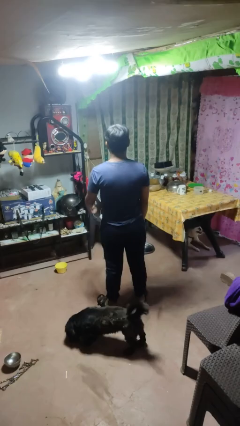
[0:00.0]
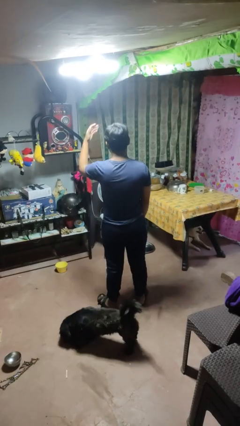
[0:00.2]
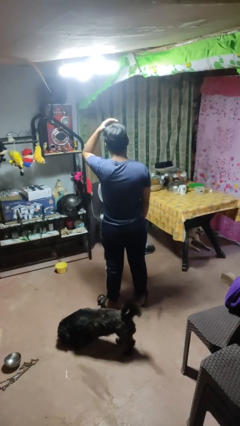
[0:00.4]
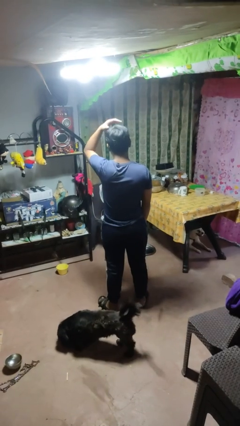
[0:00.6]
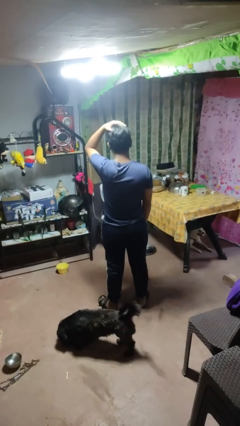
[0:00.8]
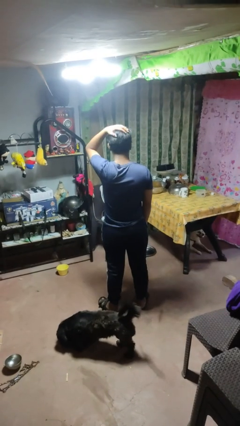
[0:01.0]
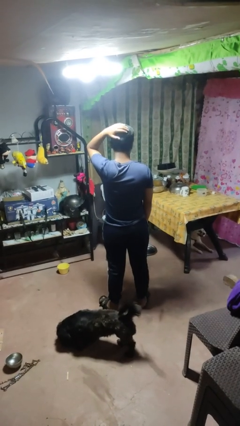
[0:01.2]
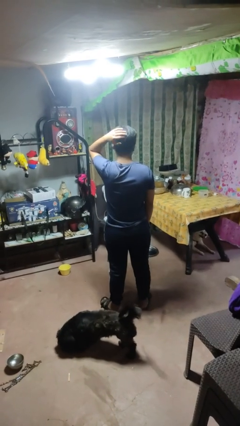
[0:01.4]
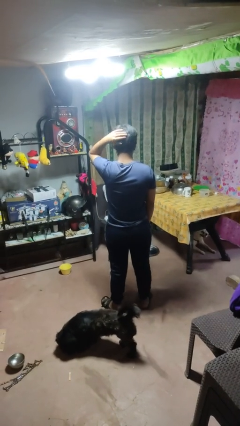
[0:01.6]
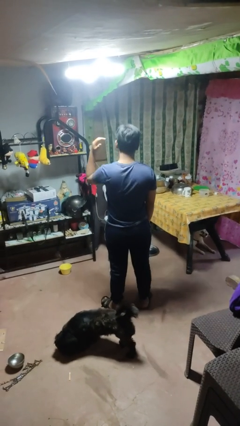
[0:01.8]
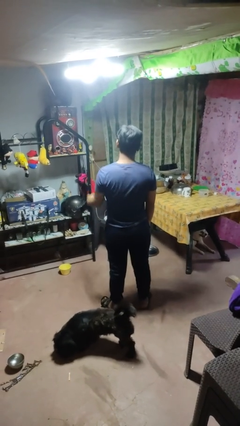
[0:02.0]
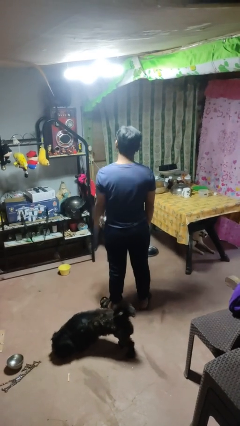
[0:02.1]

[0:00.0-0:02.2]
person pats head

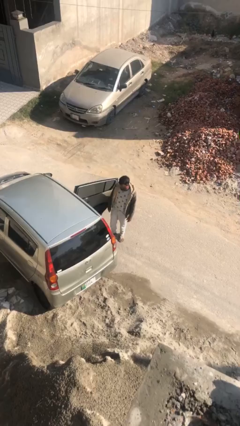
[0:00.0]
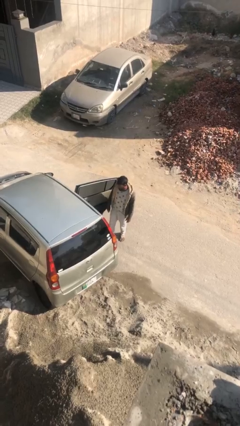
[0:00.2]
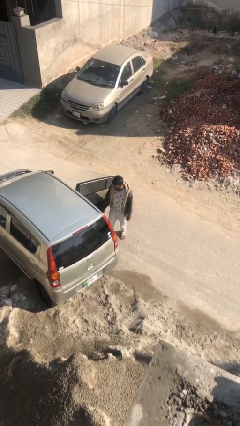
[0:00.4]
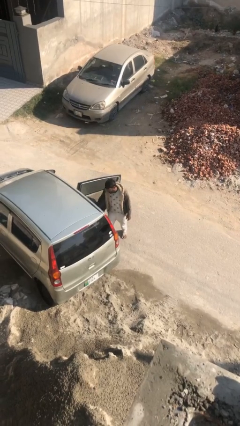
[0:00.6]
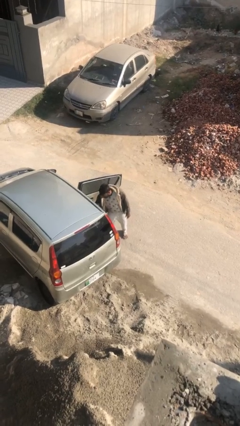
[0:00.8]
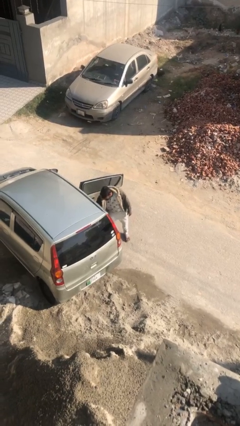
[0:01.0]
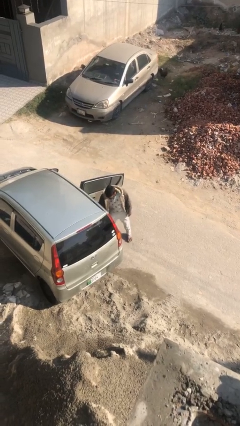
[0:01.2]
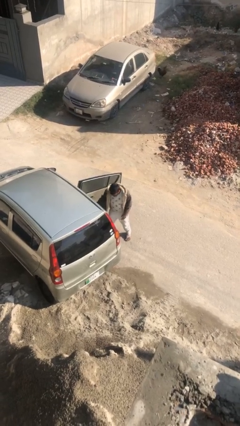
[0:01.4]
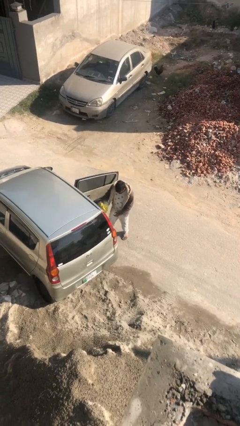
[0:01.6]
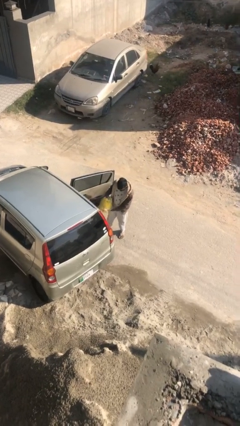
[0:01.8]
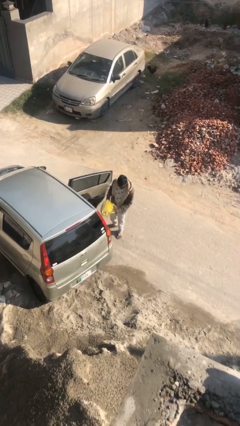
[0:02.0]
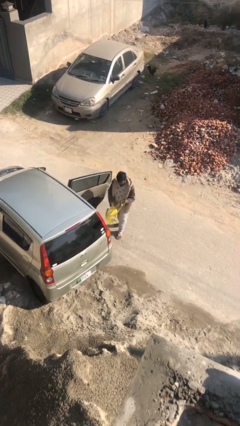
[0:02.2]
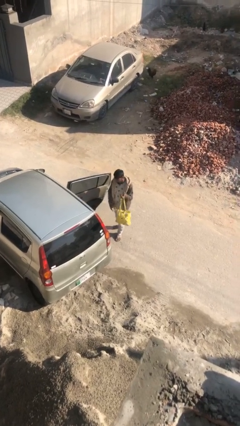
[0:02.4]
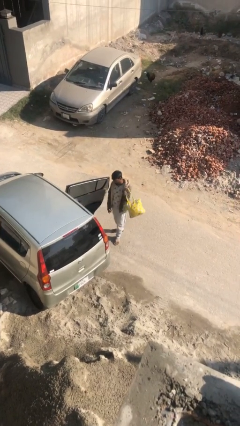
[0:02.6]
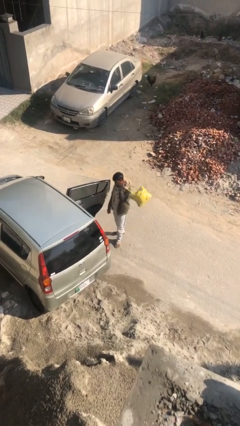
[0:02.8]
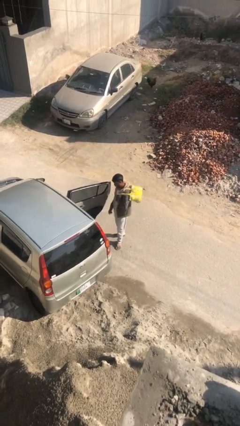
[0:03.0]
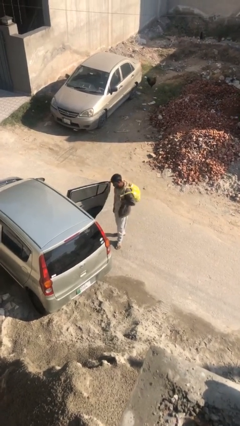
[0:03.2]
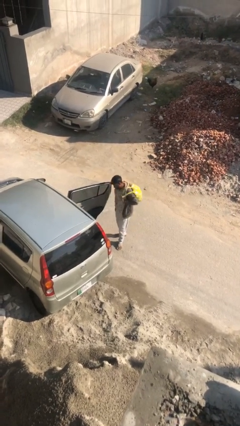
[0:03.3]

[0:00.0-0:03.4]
person unloads car

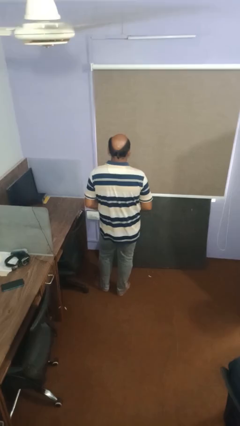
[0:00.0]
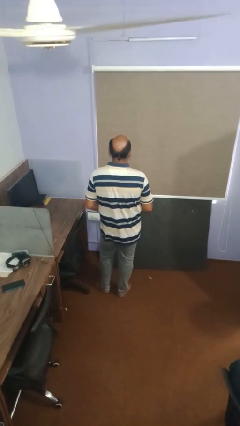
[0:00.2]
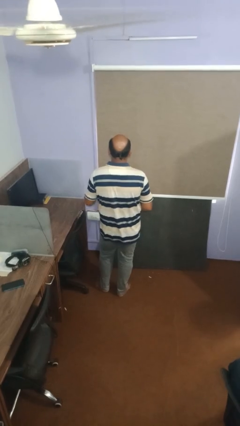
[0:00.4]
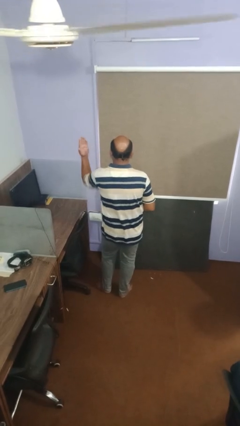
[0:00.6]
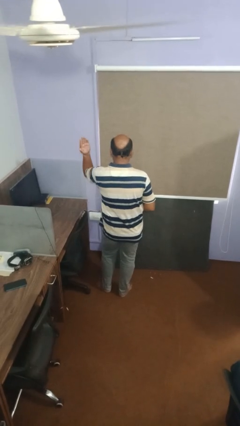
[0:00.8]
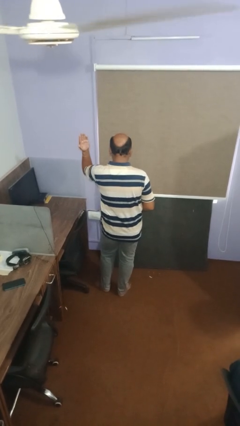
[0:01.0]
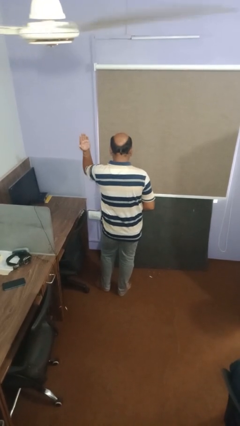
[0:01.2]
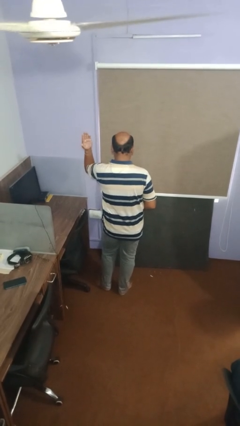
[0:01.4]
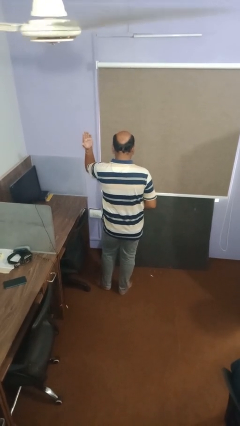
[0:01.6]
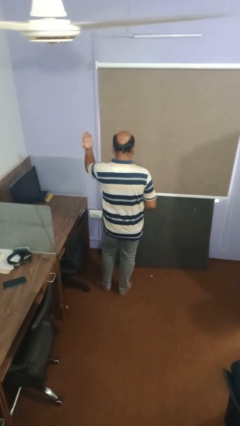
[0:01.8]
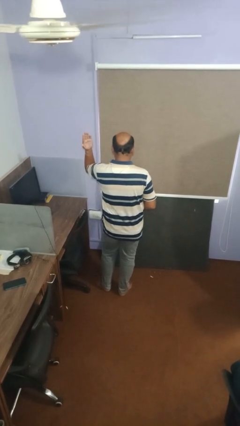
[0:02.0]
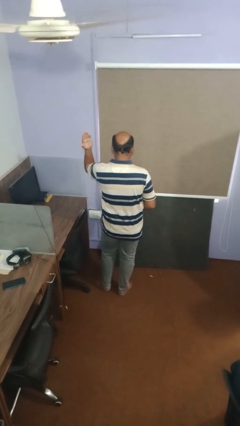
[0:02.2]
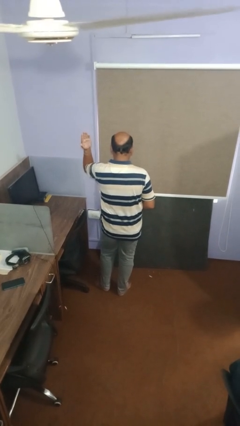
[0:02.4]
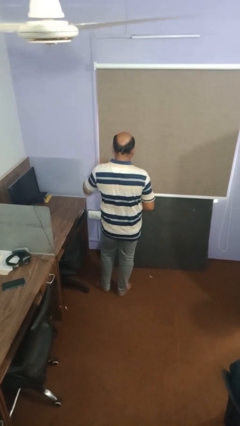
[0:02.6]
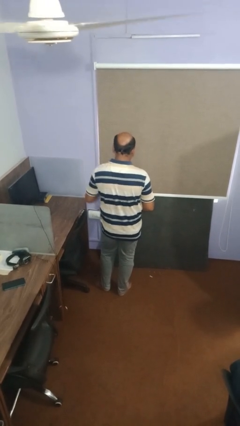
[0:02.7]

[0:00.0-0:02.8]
person gestures swipe left

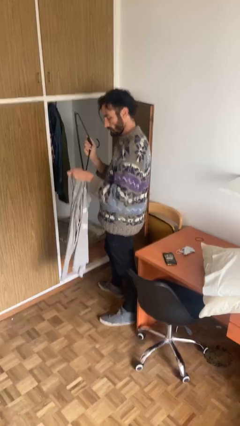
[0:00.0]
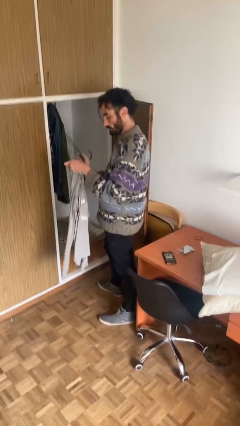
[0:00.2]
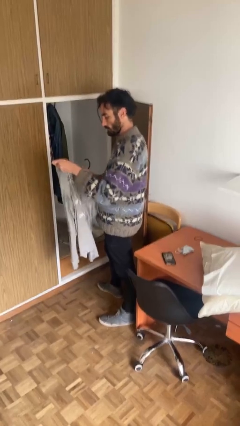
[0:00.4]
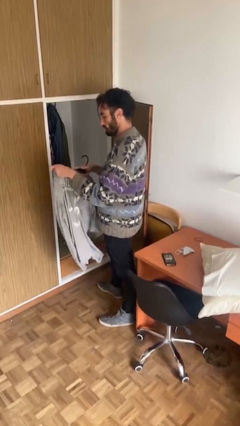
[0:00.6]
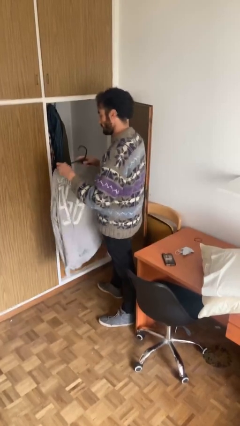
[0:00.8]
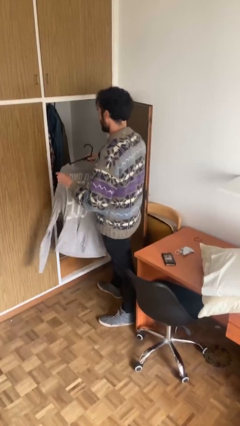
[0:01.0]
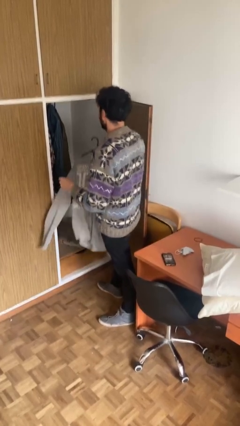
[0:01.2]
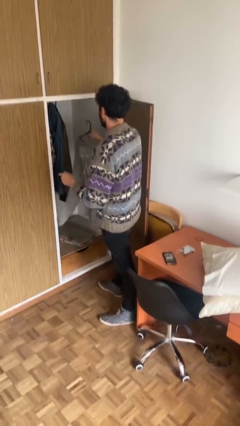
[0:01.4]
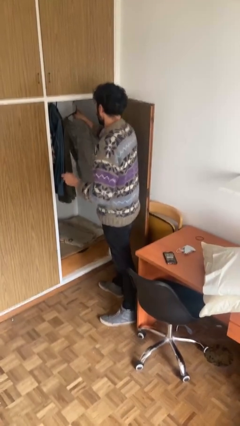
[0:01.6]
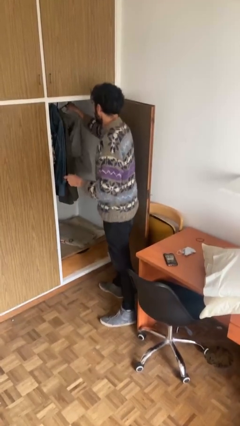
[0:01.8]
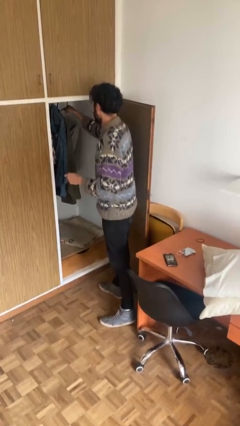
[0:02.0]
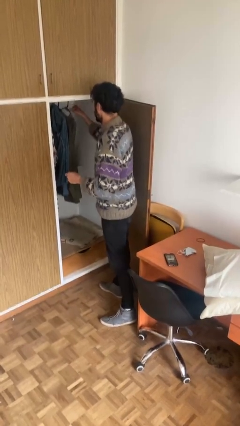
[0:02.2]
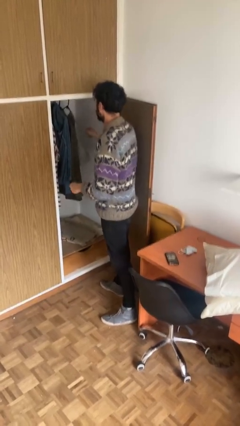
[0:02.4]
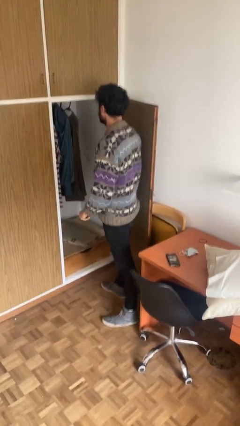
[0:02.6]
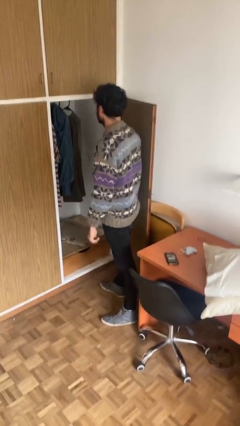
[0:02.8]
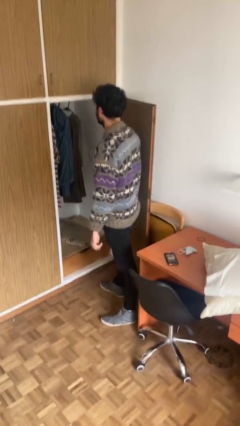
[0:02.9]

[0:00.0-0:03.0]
person puts clothes into closet

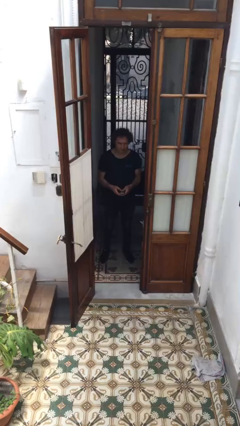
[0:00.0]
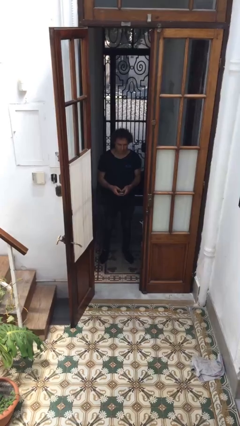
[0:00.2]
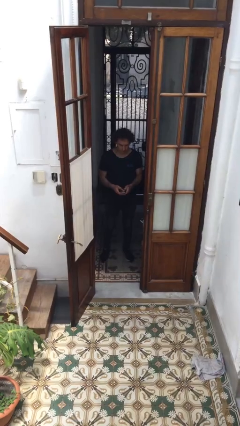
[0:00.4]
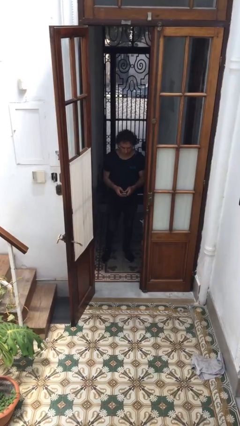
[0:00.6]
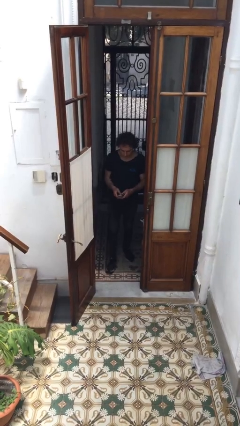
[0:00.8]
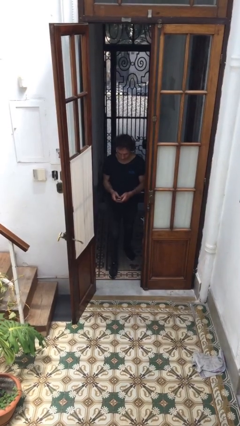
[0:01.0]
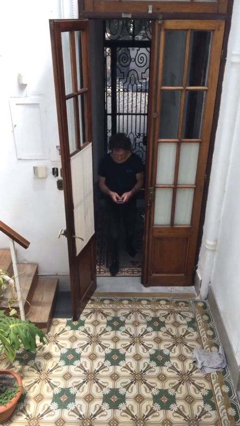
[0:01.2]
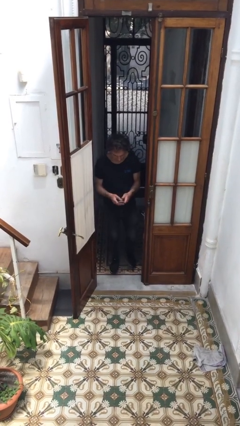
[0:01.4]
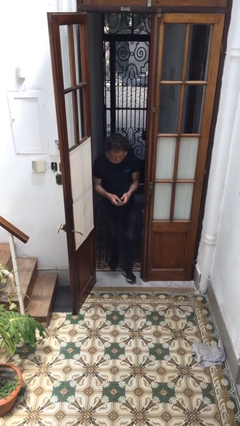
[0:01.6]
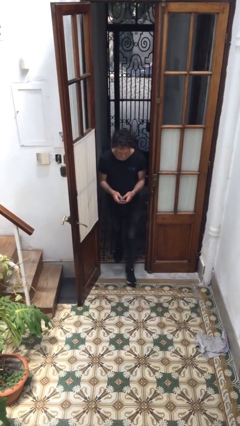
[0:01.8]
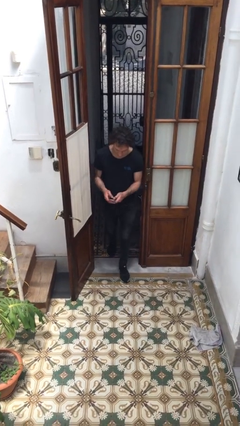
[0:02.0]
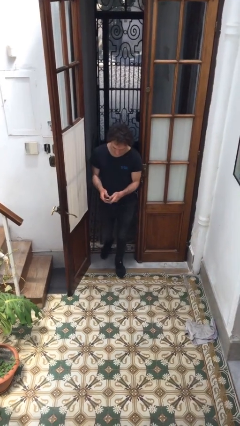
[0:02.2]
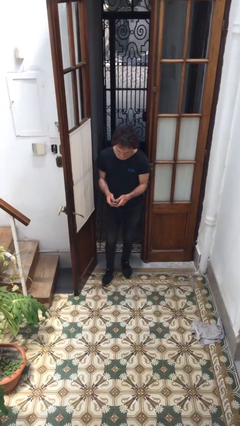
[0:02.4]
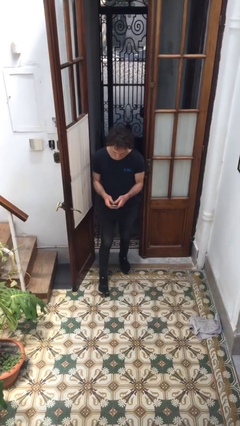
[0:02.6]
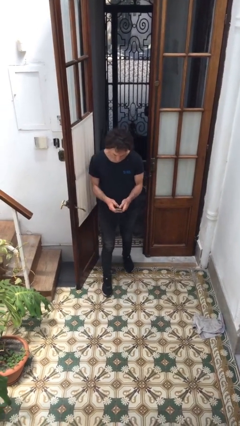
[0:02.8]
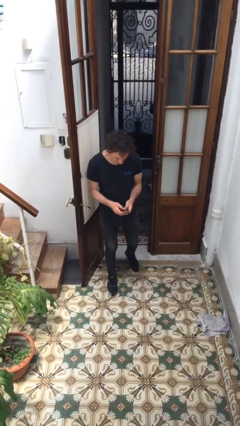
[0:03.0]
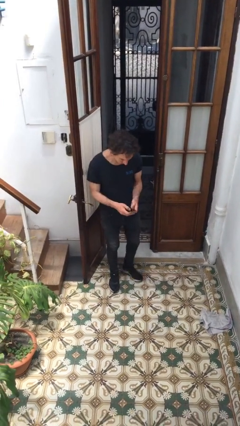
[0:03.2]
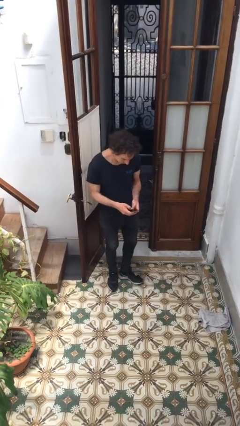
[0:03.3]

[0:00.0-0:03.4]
person enters scene through structure

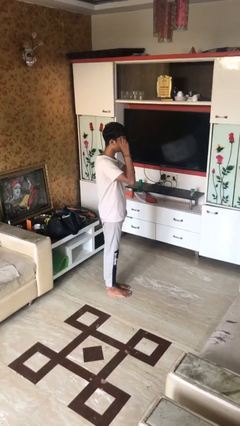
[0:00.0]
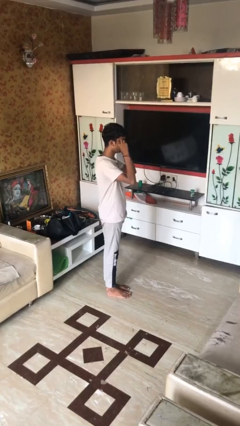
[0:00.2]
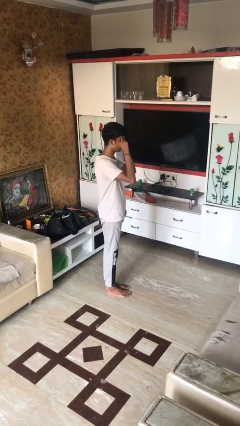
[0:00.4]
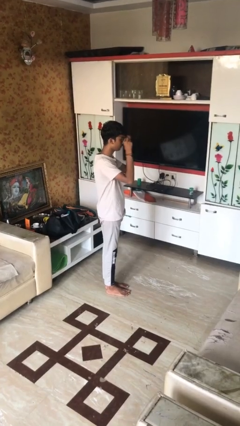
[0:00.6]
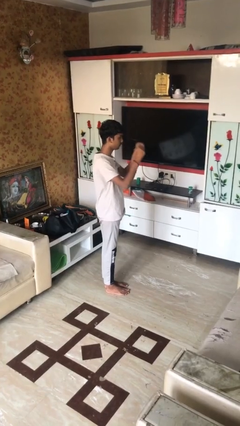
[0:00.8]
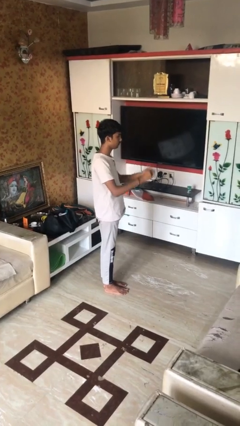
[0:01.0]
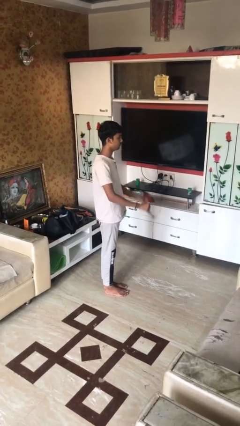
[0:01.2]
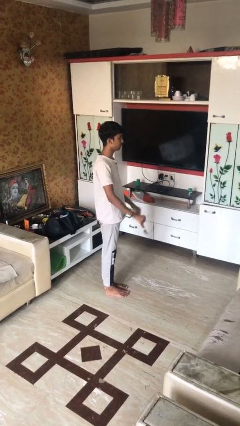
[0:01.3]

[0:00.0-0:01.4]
person takes off sunglasses

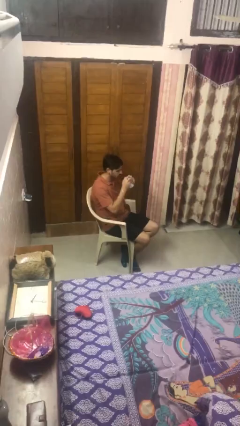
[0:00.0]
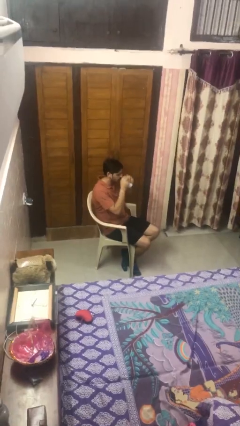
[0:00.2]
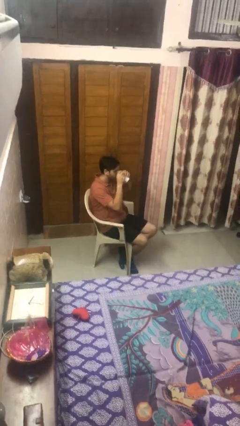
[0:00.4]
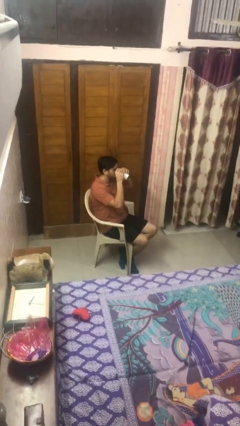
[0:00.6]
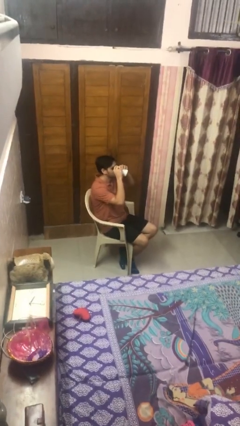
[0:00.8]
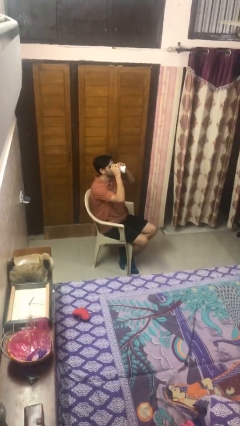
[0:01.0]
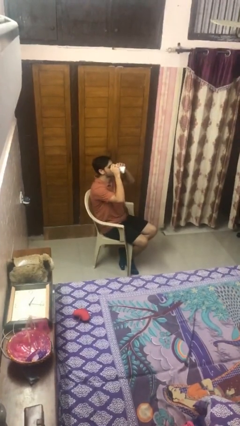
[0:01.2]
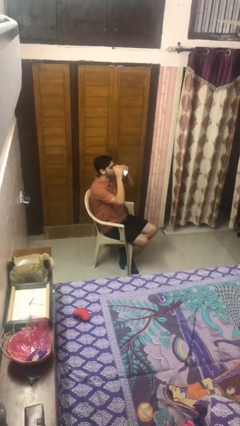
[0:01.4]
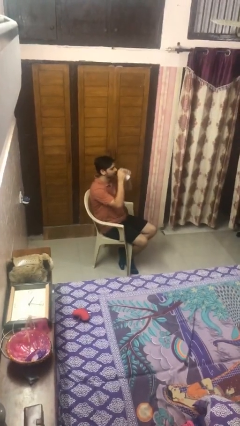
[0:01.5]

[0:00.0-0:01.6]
person drinks from mug
